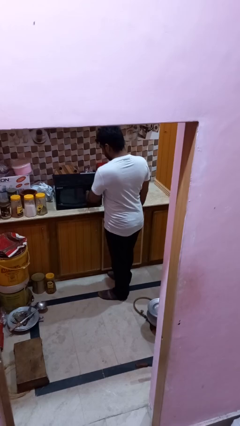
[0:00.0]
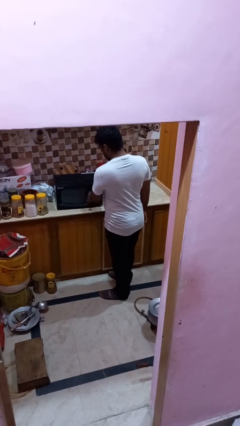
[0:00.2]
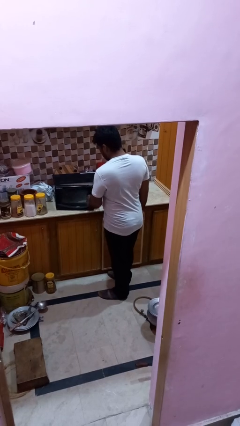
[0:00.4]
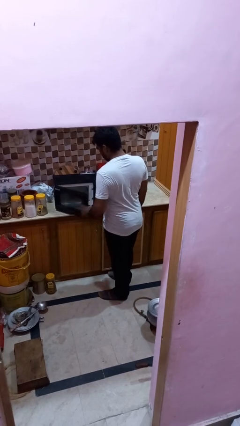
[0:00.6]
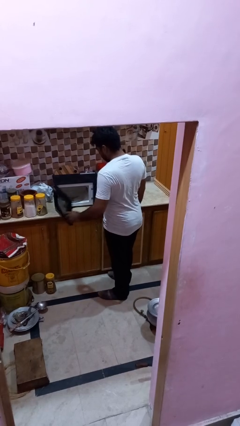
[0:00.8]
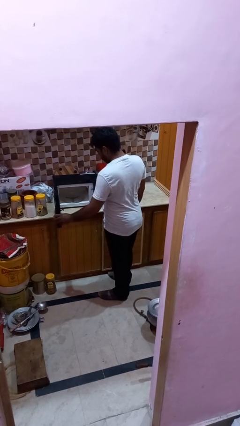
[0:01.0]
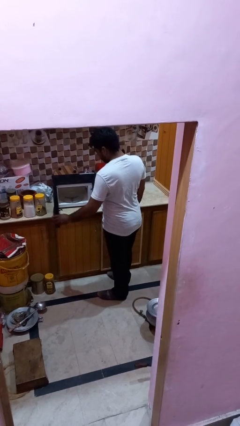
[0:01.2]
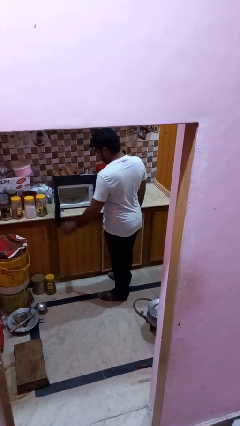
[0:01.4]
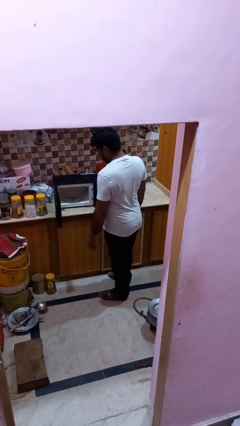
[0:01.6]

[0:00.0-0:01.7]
person opens oven door

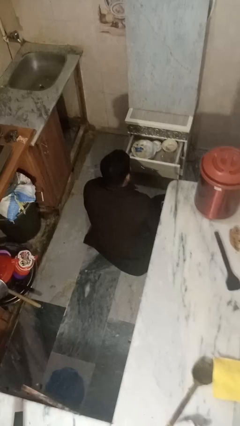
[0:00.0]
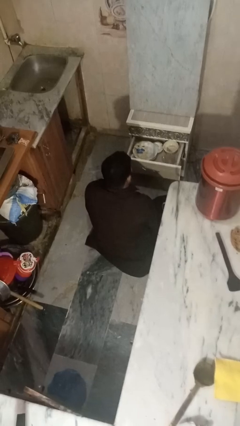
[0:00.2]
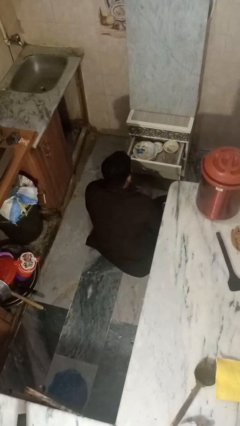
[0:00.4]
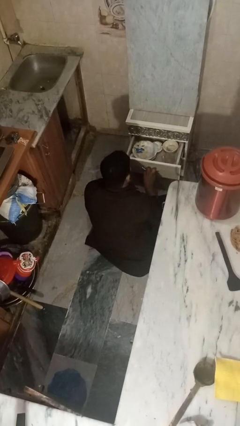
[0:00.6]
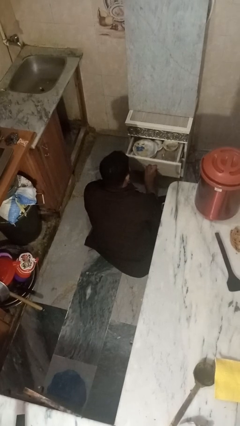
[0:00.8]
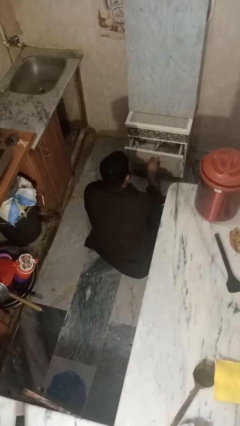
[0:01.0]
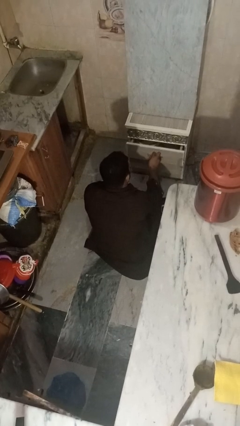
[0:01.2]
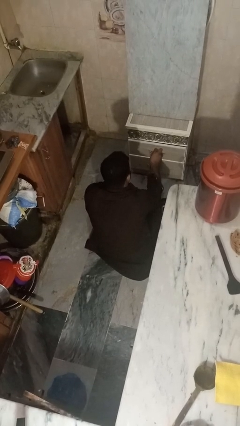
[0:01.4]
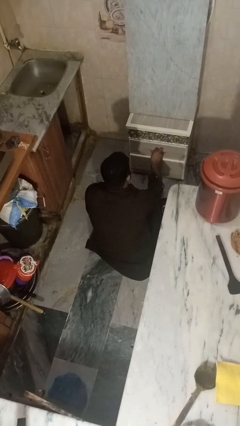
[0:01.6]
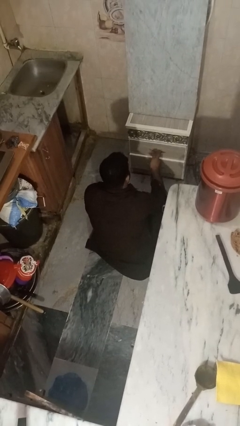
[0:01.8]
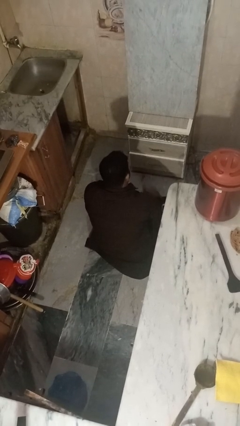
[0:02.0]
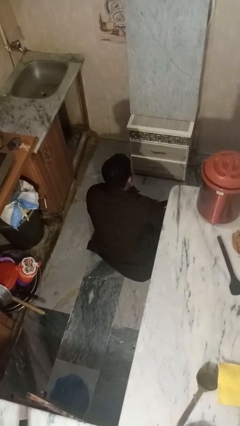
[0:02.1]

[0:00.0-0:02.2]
person closes kitchen drawer

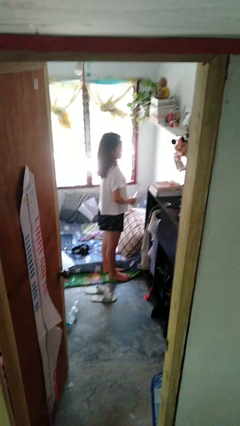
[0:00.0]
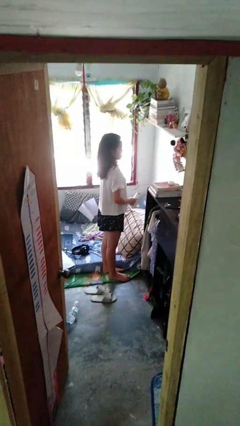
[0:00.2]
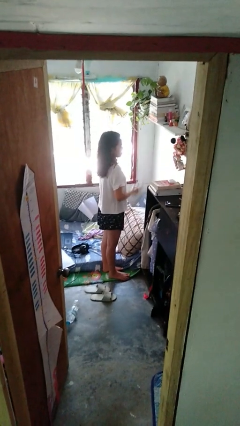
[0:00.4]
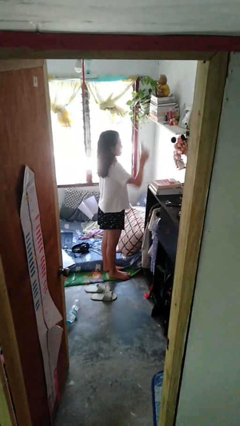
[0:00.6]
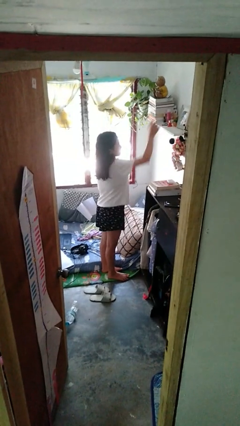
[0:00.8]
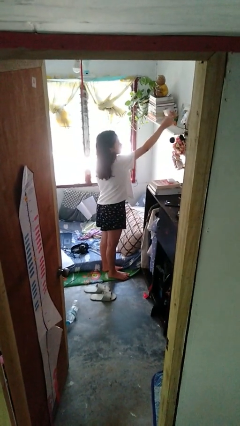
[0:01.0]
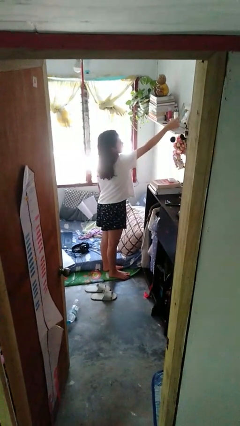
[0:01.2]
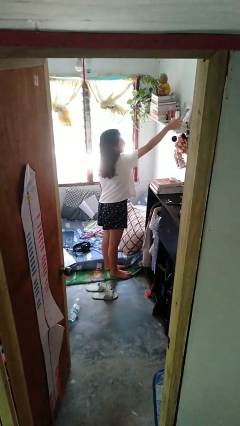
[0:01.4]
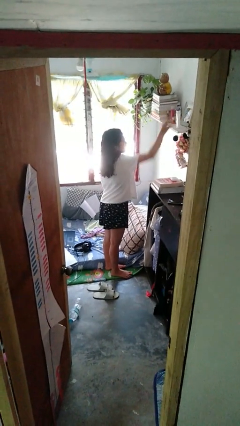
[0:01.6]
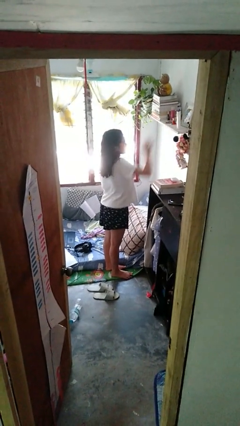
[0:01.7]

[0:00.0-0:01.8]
person puts down object on shelf

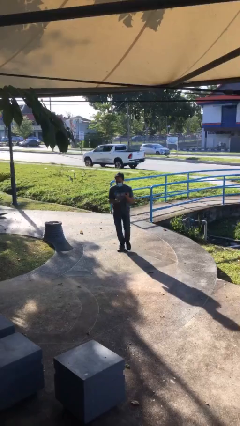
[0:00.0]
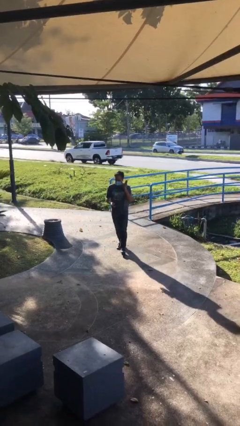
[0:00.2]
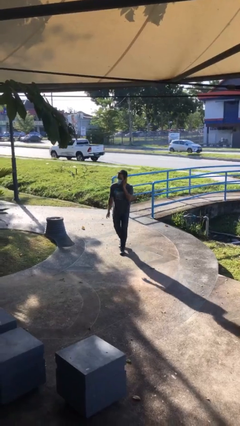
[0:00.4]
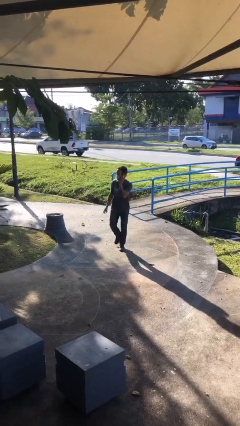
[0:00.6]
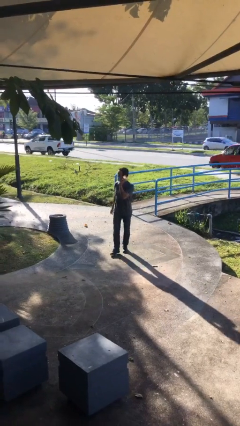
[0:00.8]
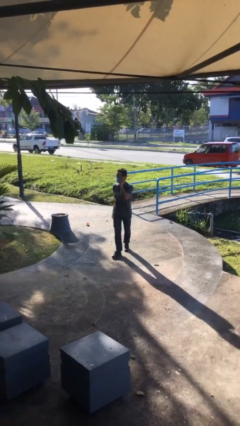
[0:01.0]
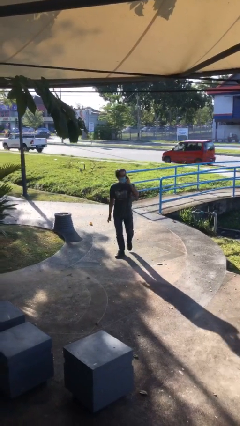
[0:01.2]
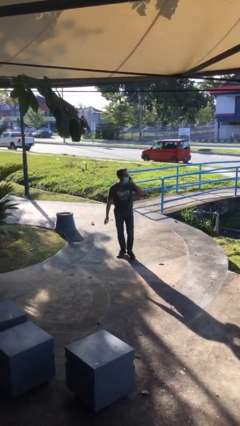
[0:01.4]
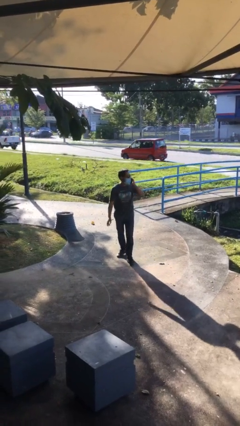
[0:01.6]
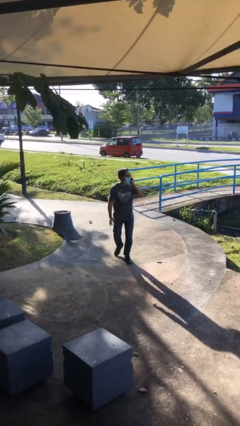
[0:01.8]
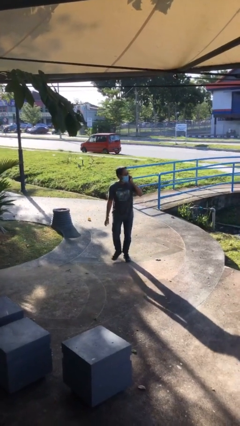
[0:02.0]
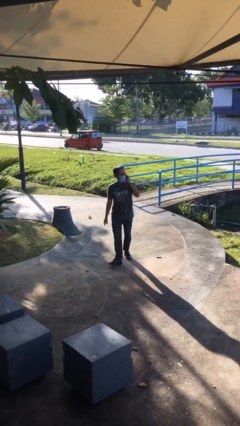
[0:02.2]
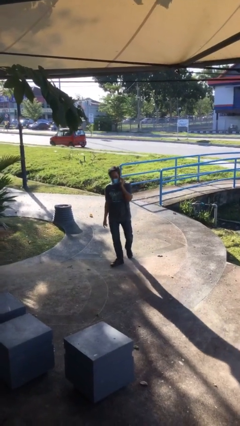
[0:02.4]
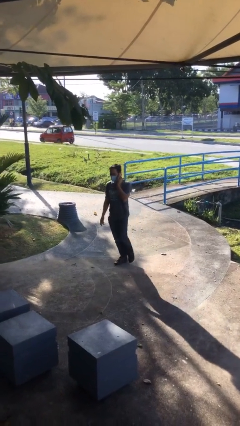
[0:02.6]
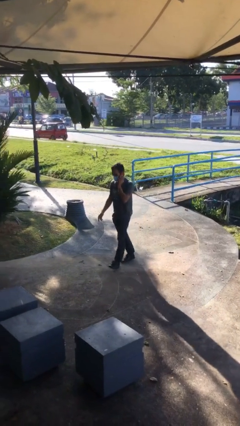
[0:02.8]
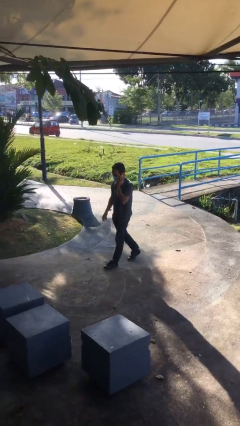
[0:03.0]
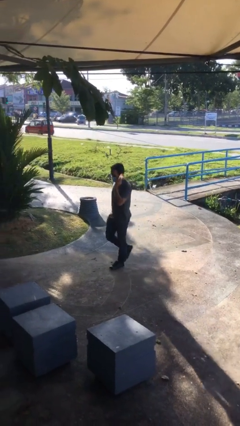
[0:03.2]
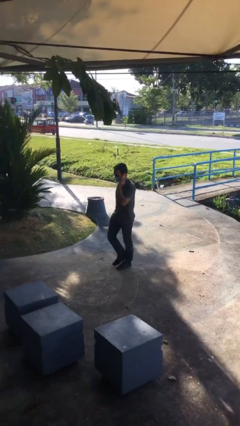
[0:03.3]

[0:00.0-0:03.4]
person talks on phone

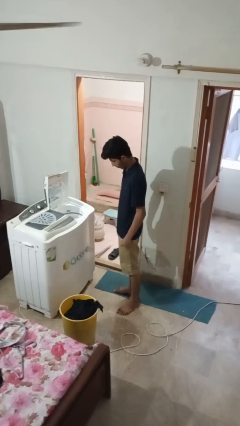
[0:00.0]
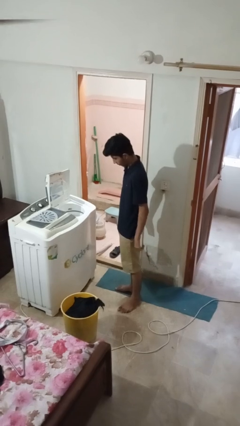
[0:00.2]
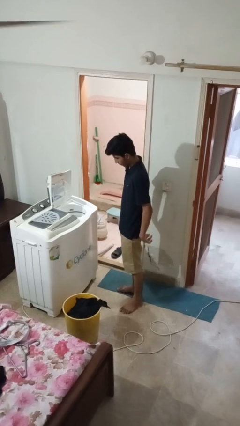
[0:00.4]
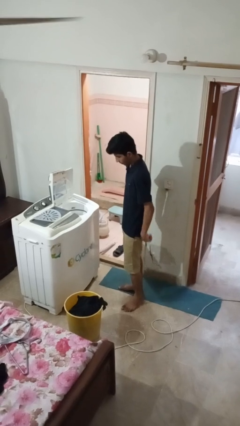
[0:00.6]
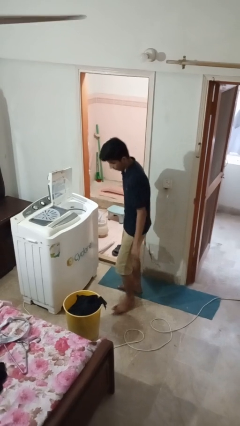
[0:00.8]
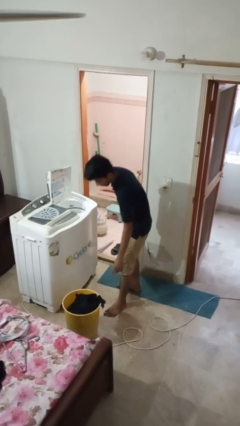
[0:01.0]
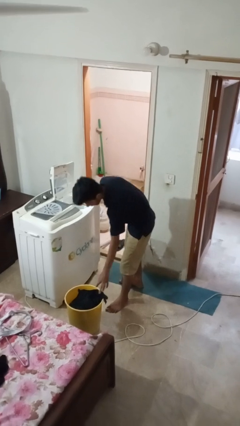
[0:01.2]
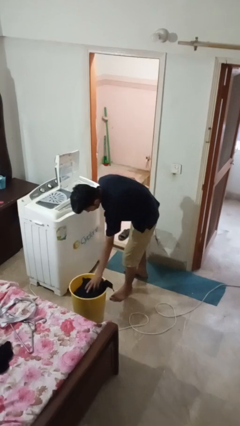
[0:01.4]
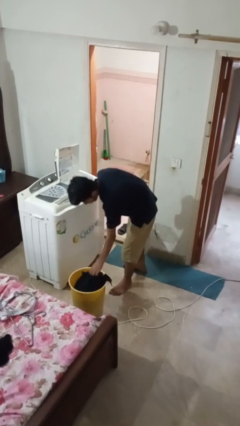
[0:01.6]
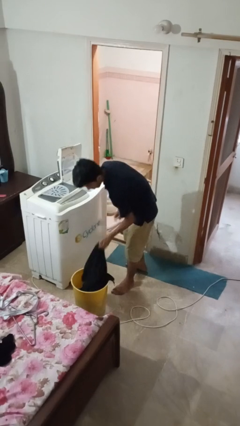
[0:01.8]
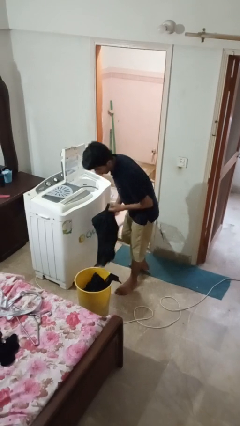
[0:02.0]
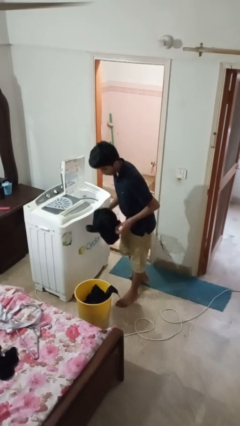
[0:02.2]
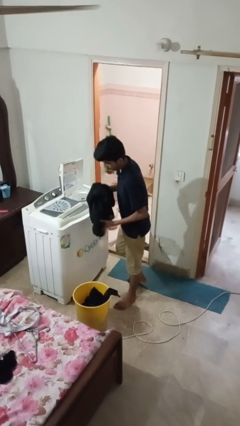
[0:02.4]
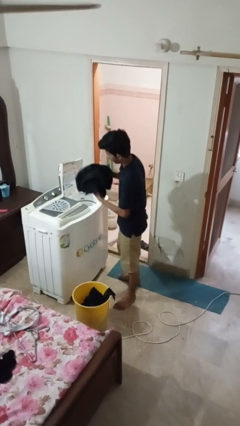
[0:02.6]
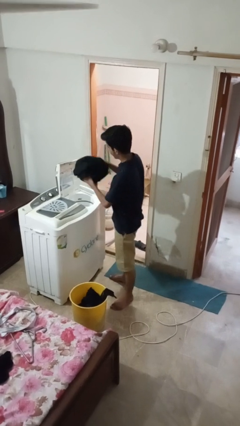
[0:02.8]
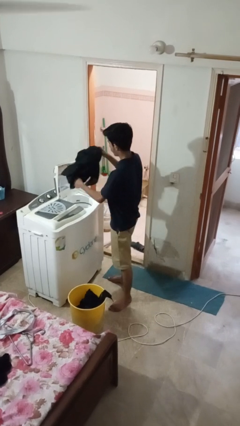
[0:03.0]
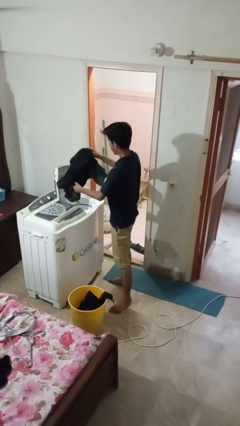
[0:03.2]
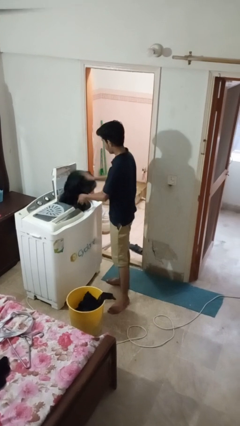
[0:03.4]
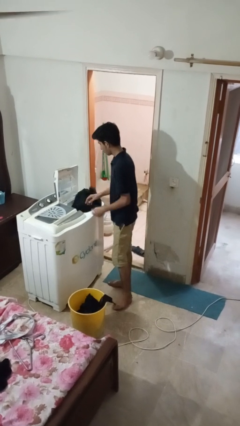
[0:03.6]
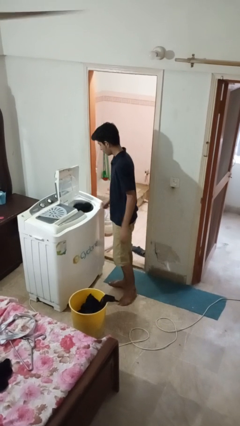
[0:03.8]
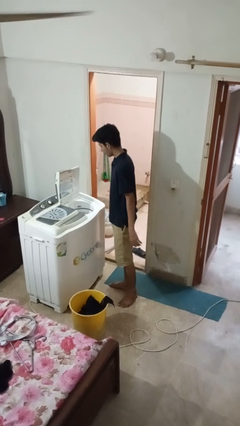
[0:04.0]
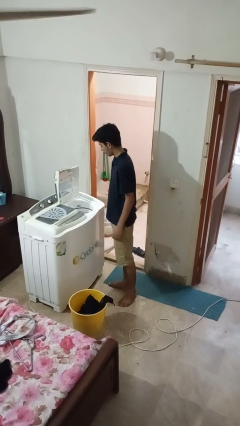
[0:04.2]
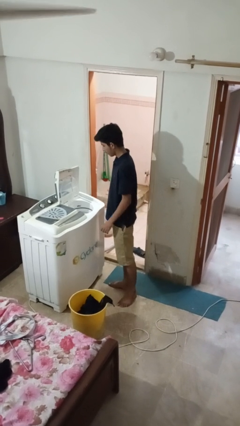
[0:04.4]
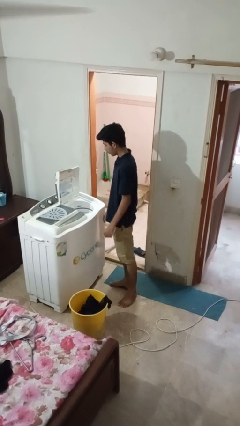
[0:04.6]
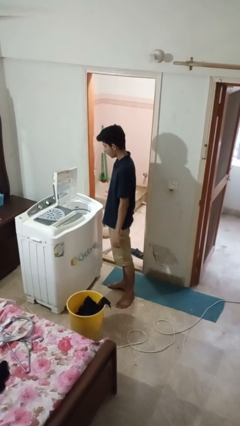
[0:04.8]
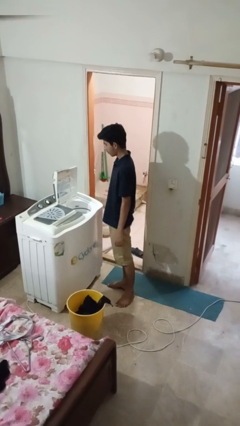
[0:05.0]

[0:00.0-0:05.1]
person loads dryer

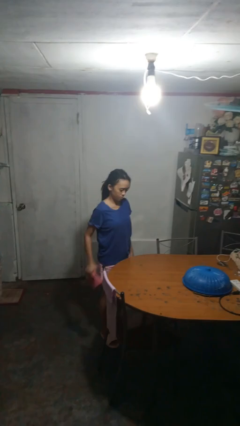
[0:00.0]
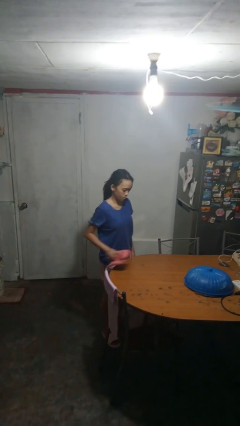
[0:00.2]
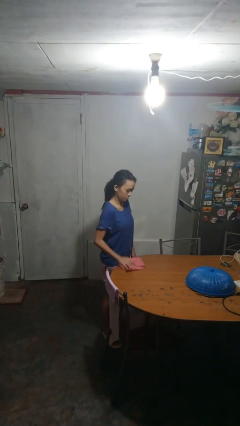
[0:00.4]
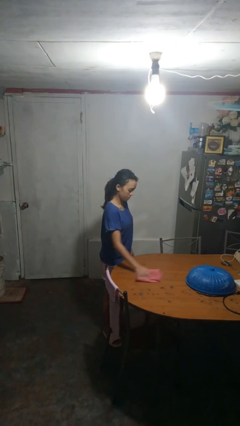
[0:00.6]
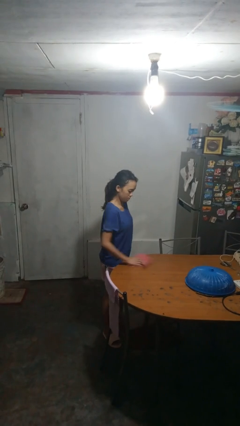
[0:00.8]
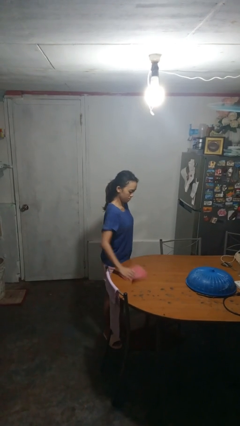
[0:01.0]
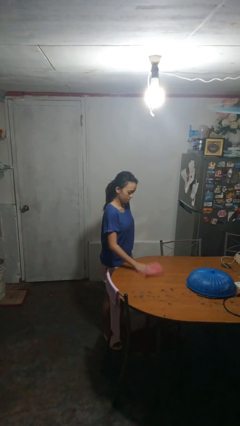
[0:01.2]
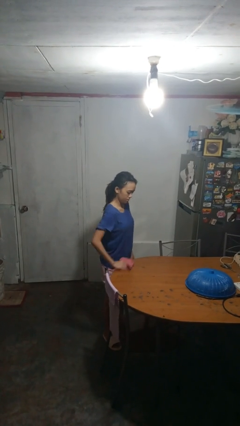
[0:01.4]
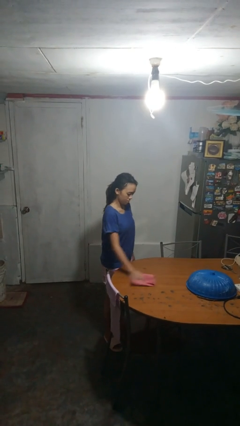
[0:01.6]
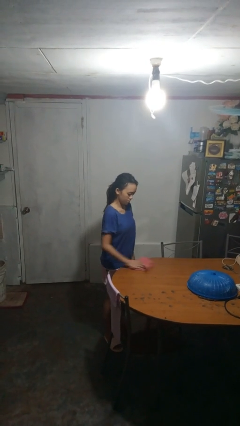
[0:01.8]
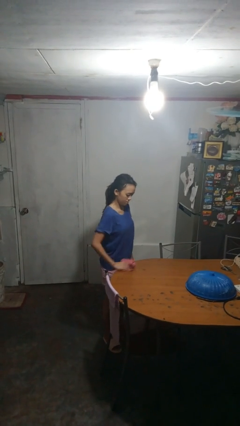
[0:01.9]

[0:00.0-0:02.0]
person cleans table with rag

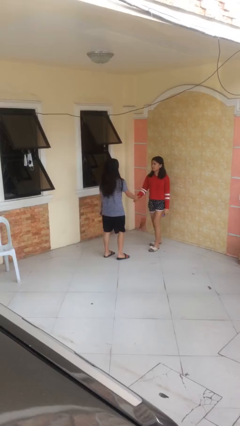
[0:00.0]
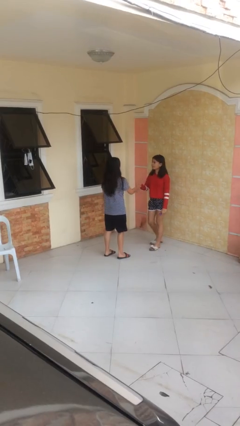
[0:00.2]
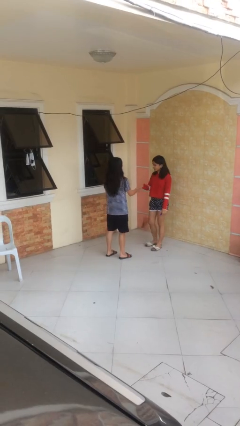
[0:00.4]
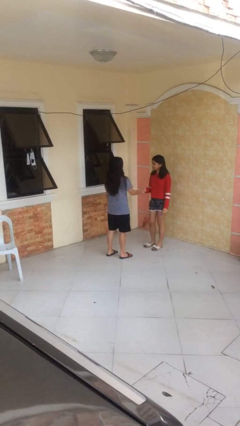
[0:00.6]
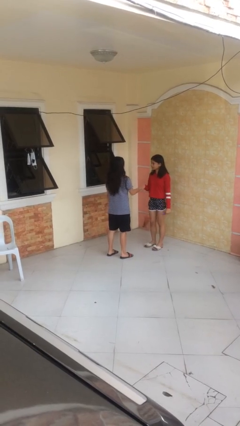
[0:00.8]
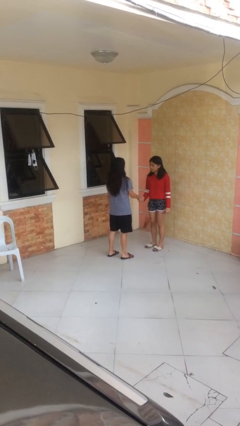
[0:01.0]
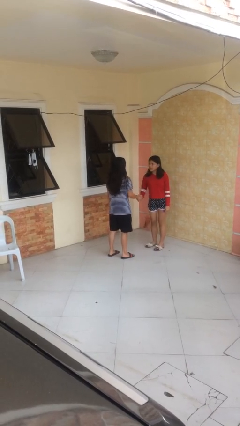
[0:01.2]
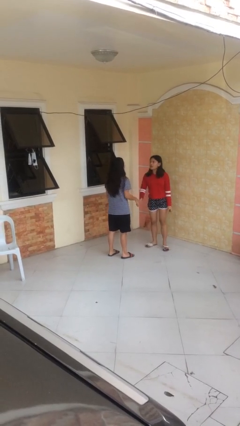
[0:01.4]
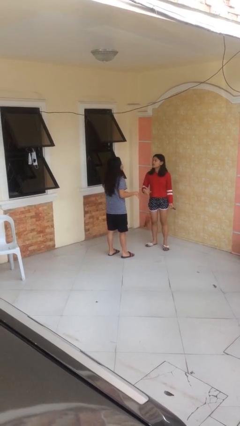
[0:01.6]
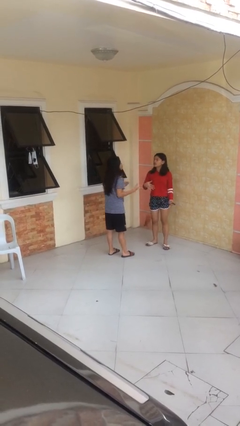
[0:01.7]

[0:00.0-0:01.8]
person shakes hand
